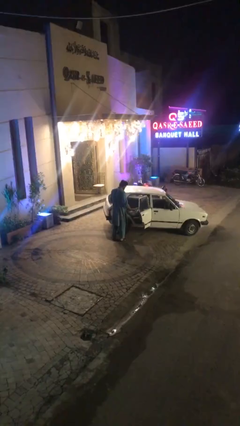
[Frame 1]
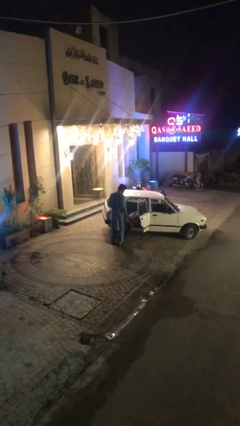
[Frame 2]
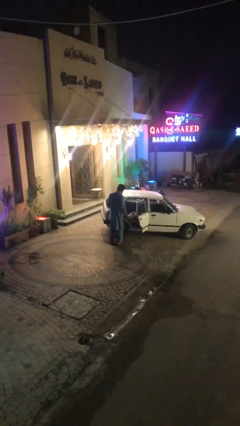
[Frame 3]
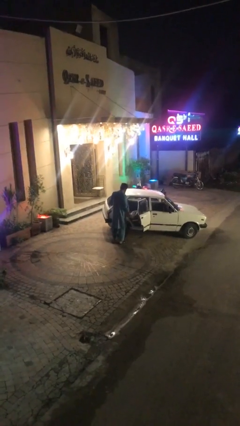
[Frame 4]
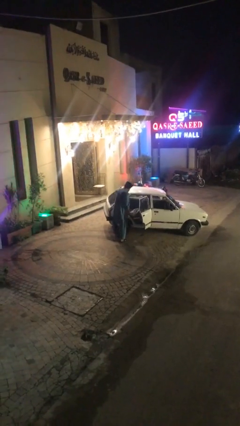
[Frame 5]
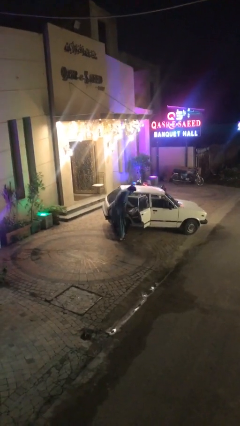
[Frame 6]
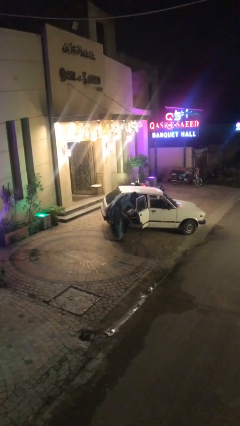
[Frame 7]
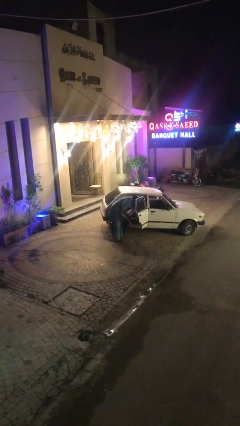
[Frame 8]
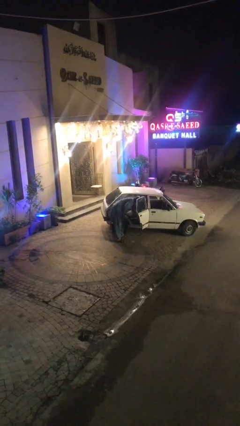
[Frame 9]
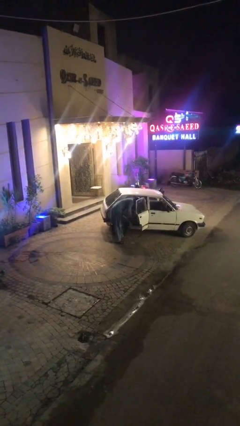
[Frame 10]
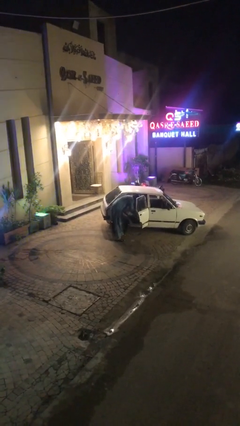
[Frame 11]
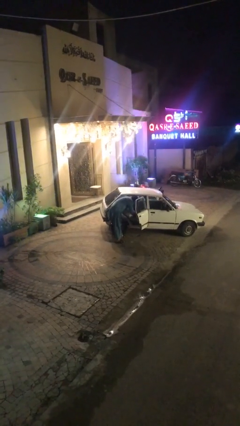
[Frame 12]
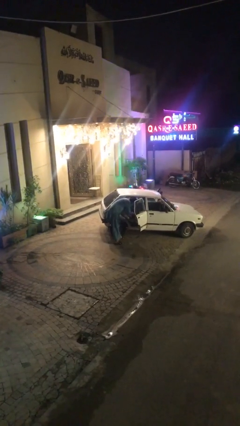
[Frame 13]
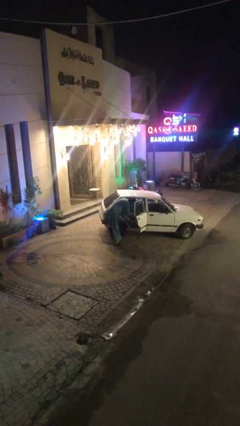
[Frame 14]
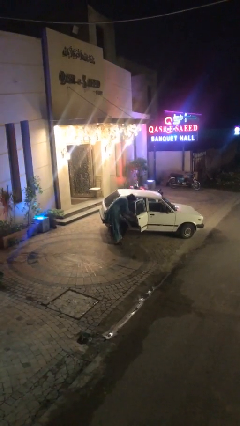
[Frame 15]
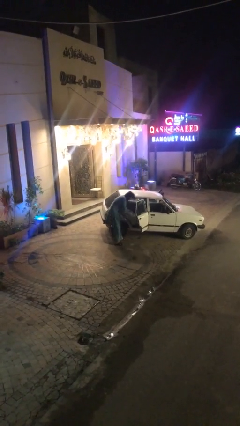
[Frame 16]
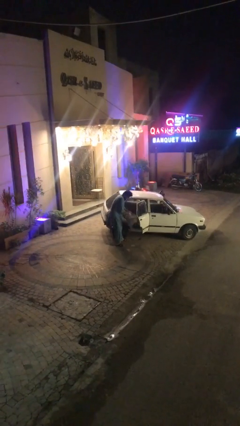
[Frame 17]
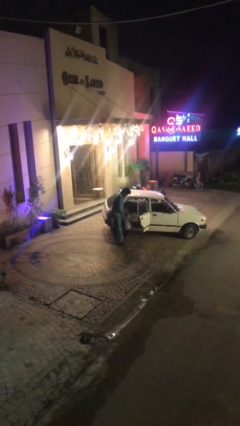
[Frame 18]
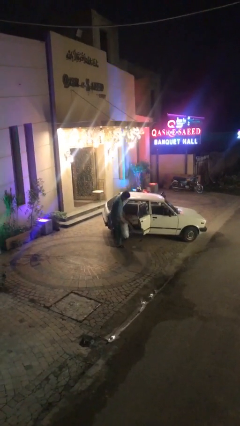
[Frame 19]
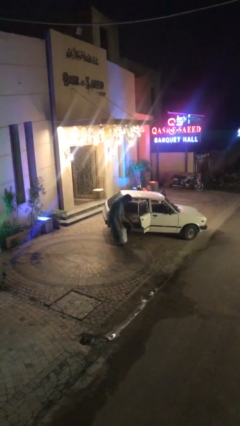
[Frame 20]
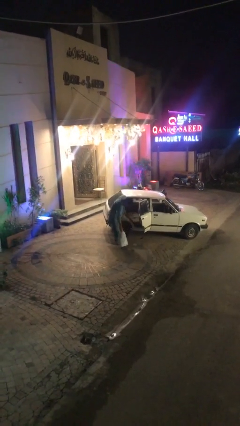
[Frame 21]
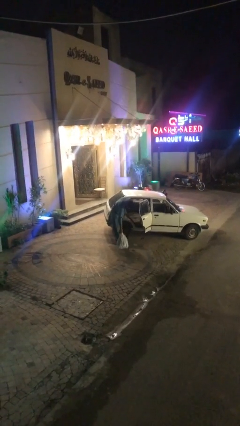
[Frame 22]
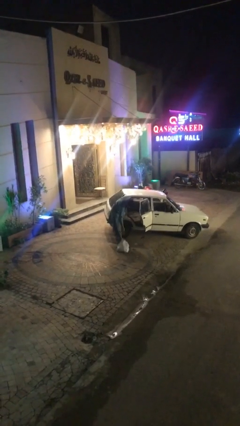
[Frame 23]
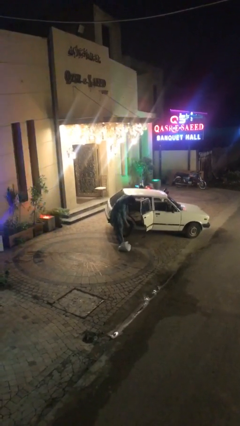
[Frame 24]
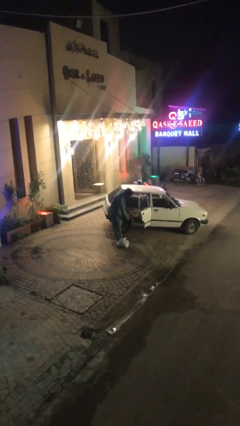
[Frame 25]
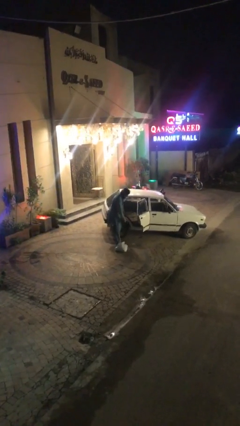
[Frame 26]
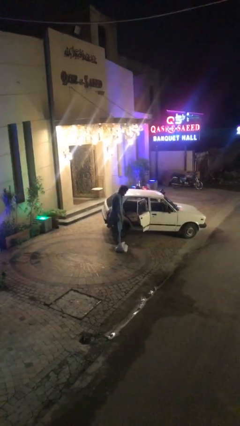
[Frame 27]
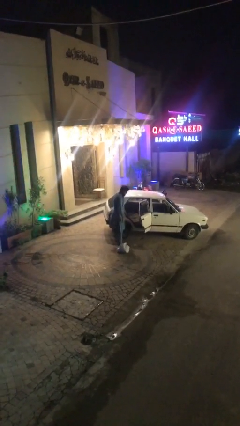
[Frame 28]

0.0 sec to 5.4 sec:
person unloads car

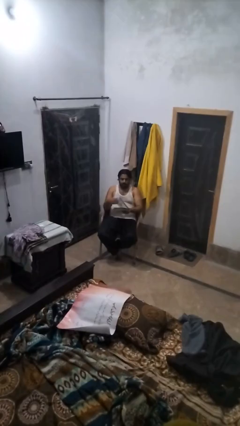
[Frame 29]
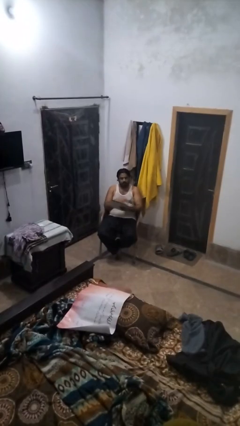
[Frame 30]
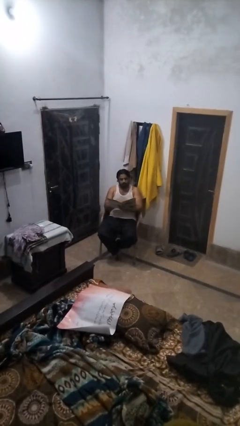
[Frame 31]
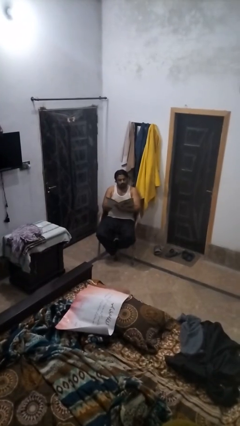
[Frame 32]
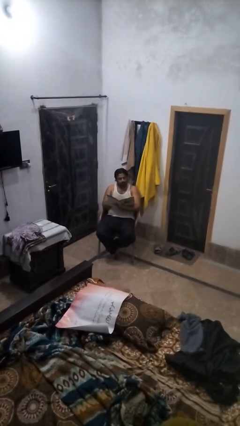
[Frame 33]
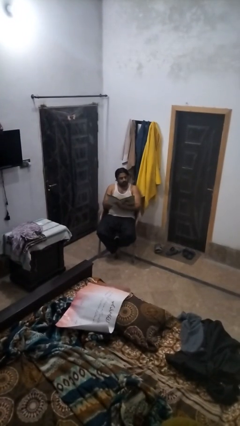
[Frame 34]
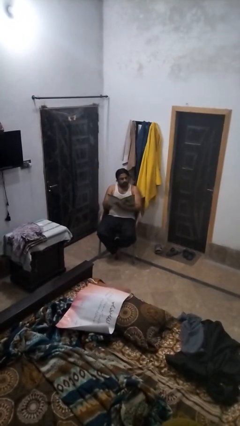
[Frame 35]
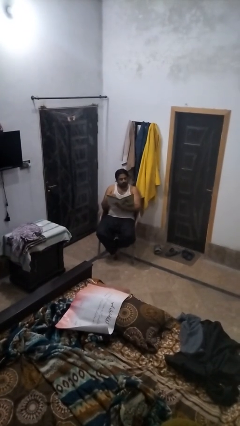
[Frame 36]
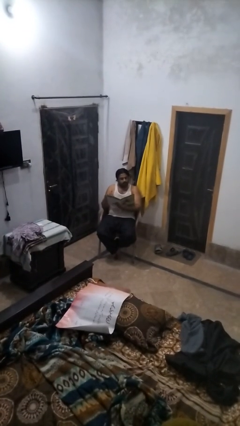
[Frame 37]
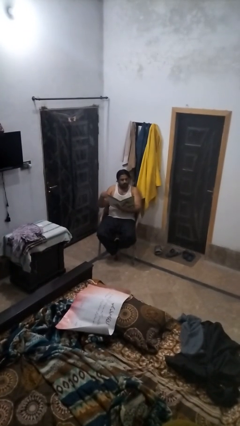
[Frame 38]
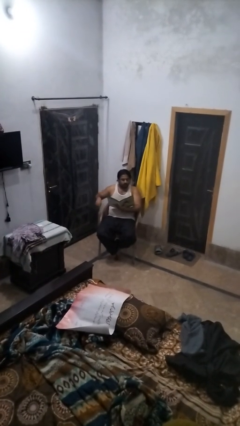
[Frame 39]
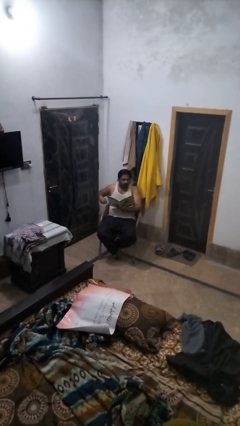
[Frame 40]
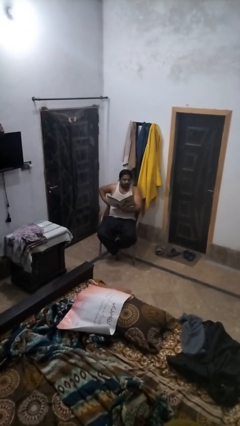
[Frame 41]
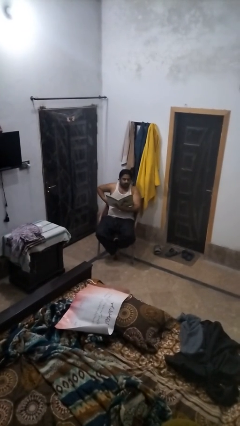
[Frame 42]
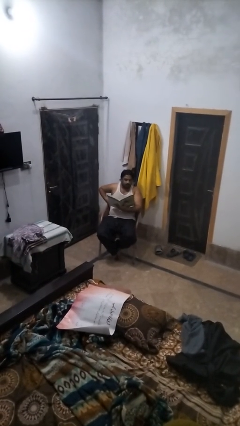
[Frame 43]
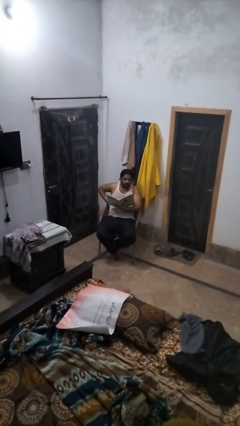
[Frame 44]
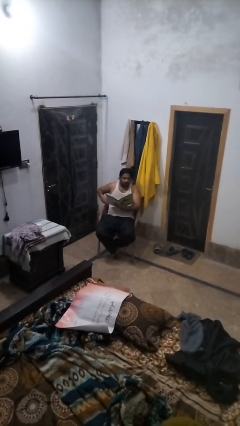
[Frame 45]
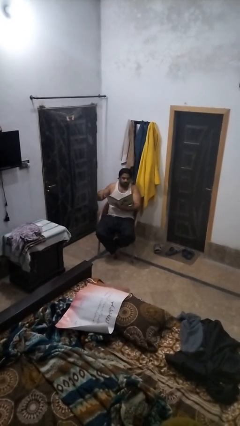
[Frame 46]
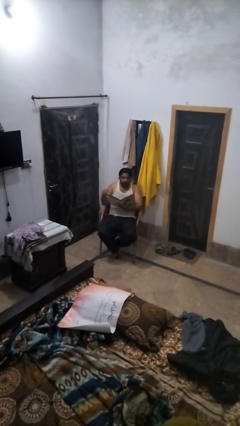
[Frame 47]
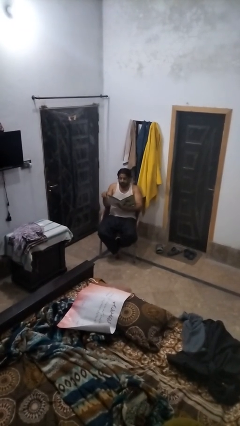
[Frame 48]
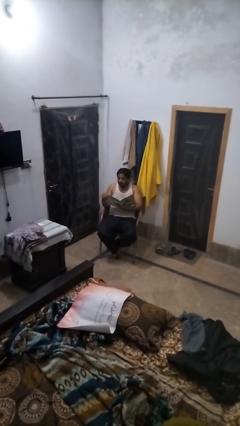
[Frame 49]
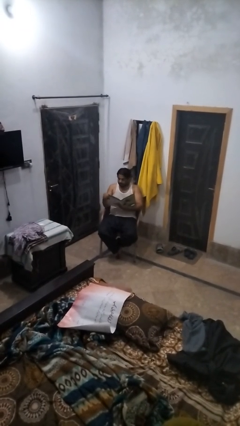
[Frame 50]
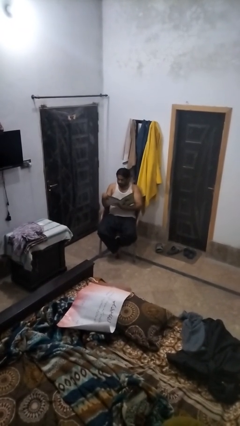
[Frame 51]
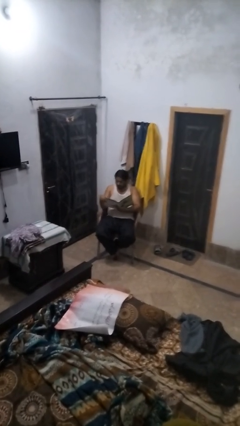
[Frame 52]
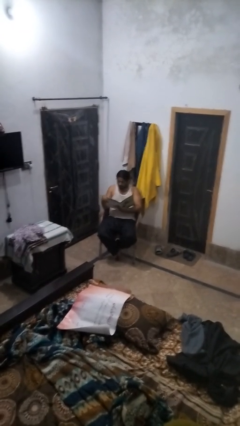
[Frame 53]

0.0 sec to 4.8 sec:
person reads magazine

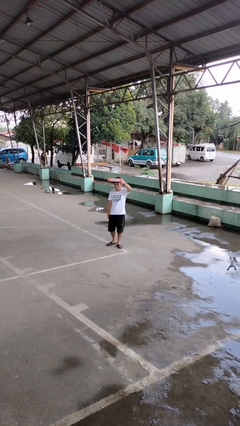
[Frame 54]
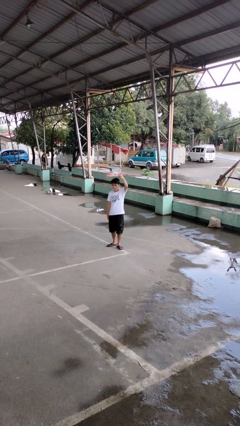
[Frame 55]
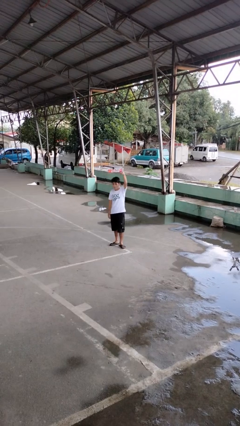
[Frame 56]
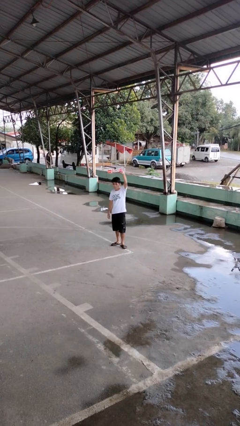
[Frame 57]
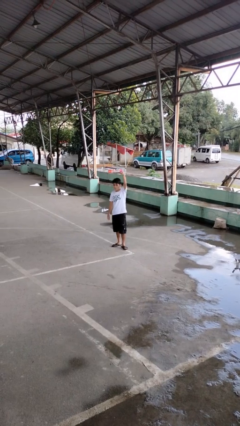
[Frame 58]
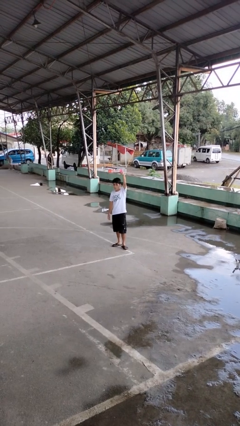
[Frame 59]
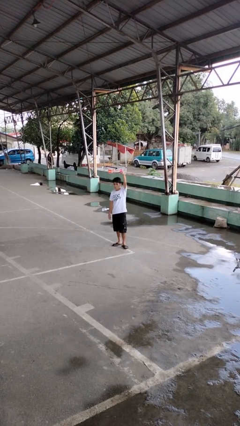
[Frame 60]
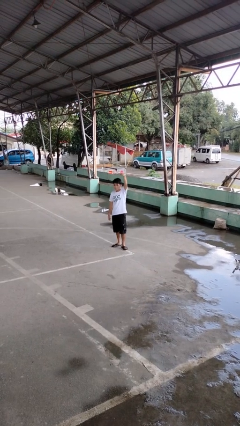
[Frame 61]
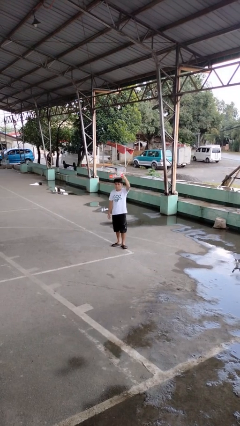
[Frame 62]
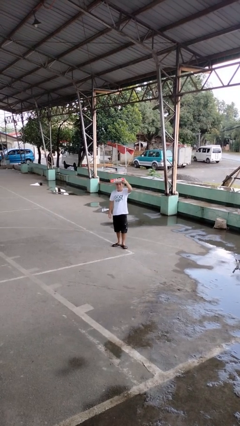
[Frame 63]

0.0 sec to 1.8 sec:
person holds object above head

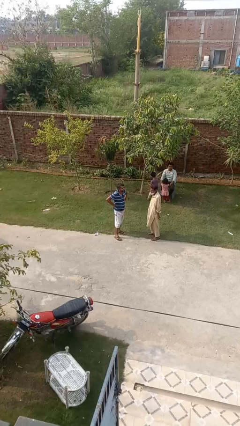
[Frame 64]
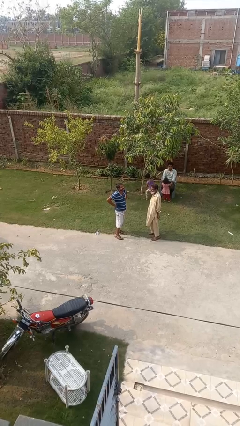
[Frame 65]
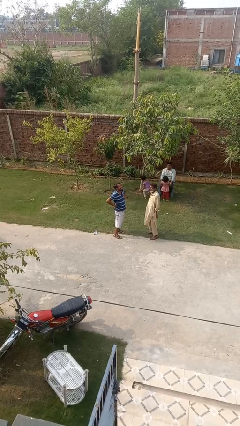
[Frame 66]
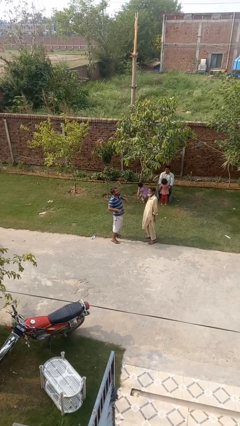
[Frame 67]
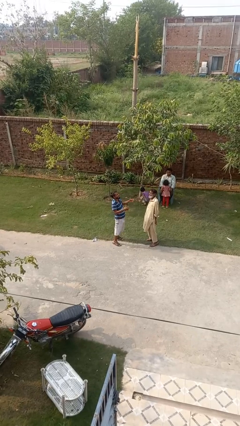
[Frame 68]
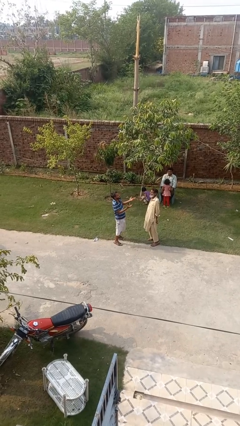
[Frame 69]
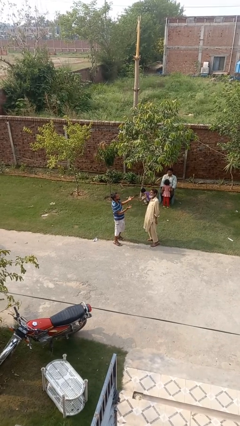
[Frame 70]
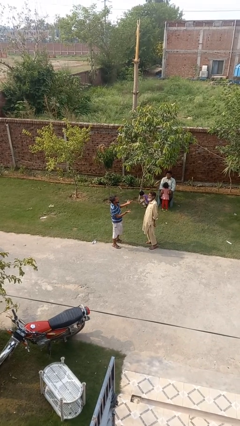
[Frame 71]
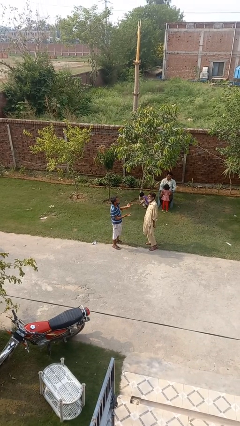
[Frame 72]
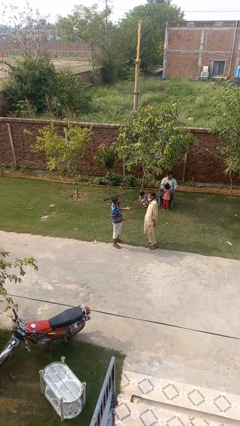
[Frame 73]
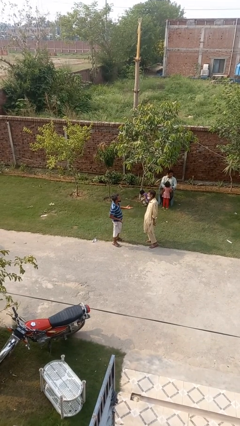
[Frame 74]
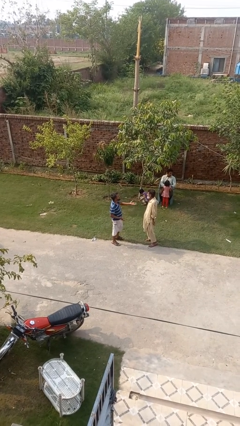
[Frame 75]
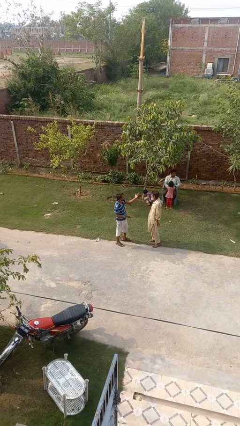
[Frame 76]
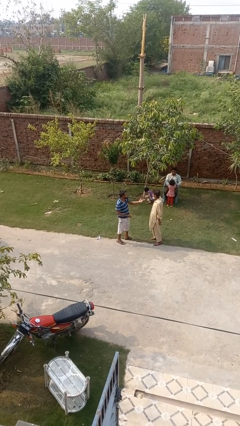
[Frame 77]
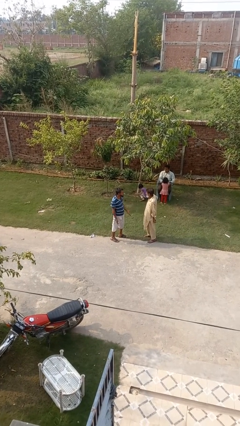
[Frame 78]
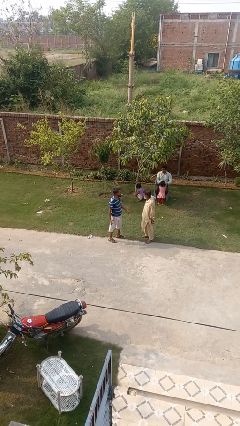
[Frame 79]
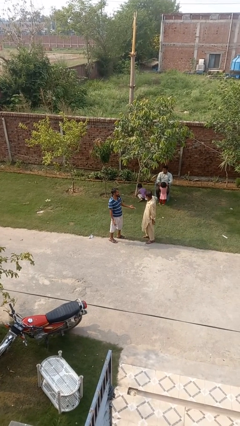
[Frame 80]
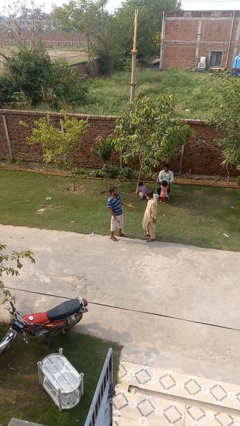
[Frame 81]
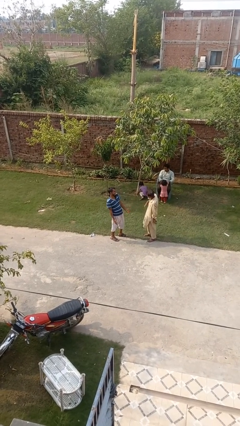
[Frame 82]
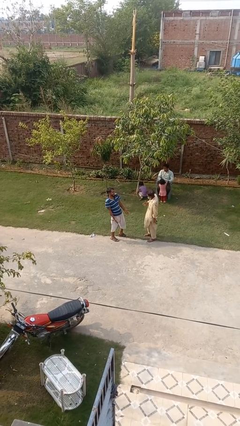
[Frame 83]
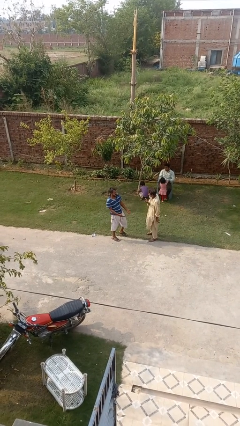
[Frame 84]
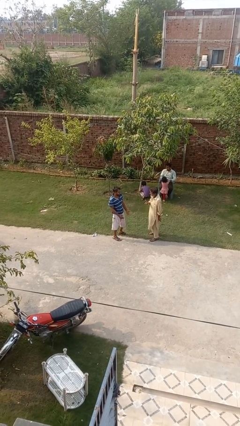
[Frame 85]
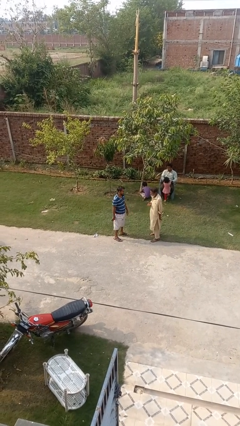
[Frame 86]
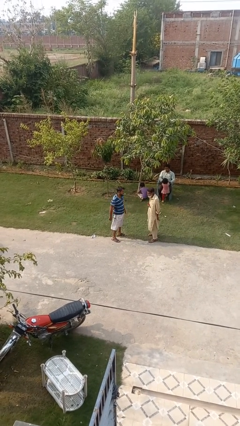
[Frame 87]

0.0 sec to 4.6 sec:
person laughs with person

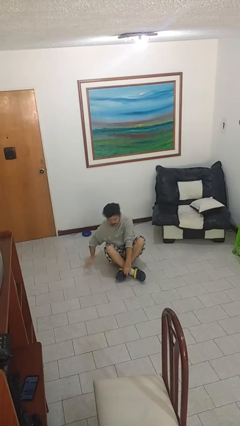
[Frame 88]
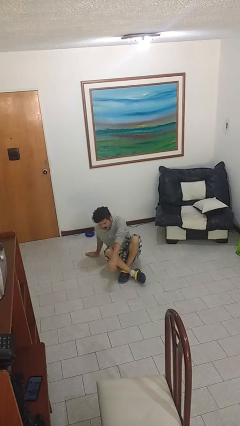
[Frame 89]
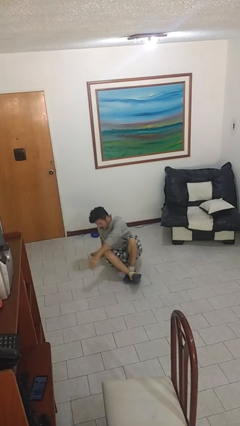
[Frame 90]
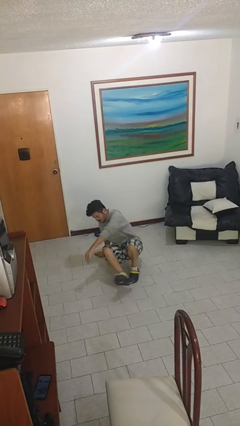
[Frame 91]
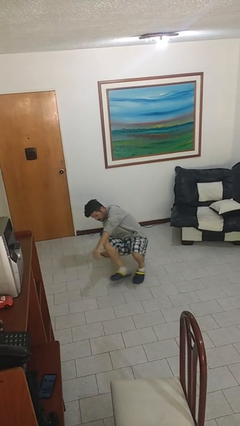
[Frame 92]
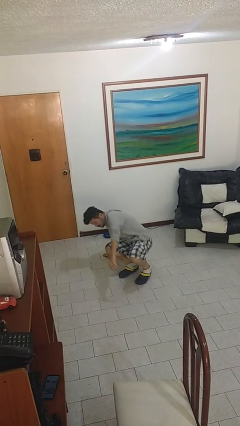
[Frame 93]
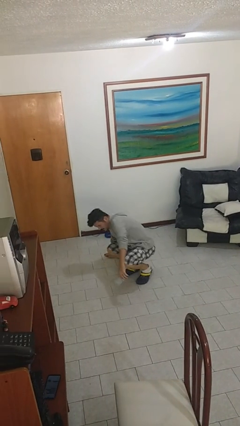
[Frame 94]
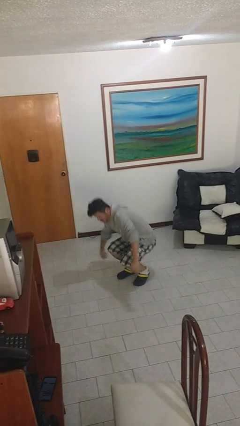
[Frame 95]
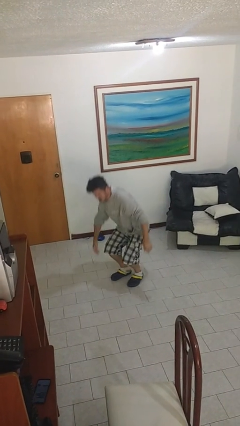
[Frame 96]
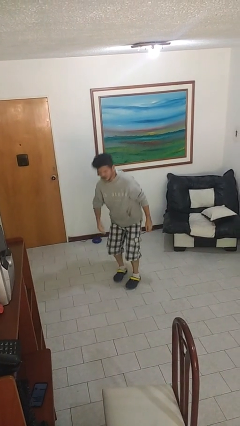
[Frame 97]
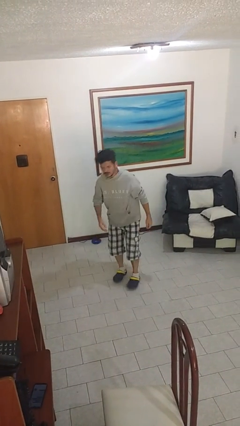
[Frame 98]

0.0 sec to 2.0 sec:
person stands up from floor
